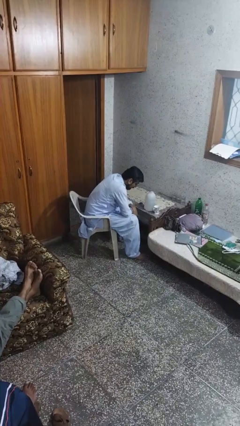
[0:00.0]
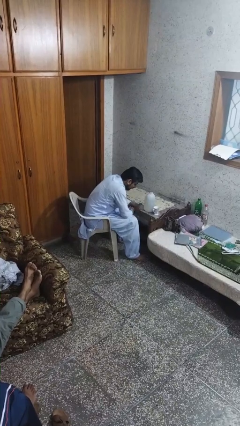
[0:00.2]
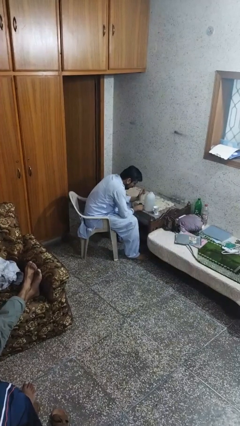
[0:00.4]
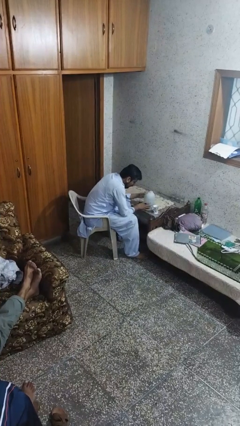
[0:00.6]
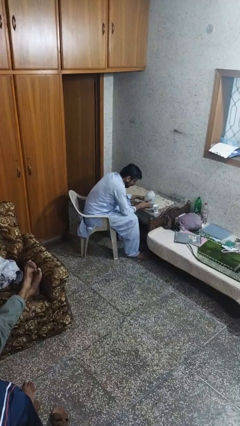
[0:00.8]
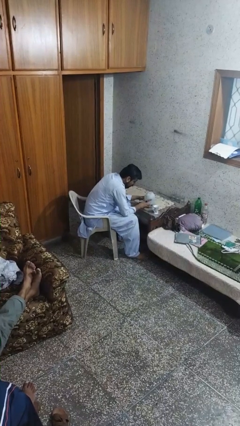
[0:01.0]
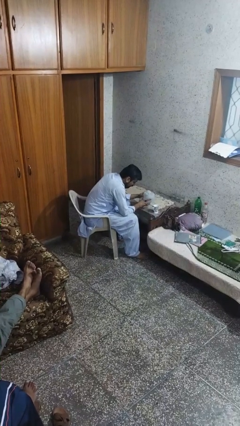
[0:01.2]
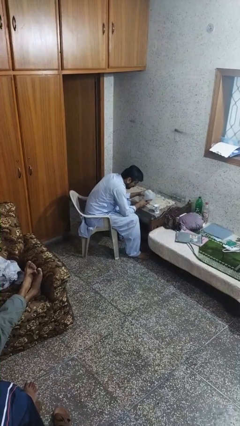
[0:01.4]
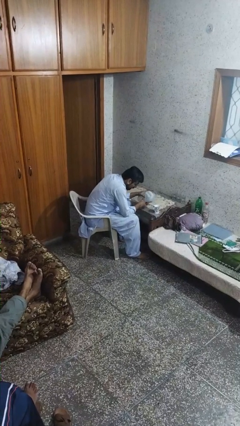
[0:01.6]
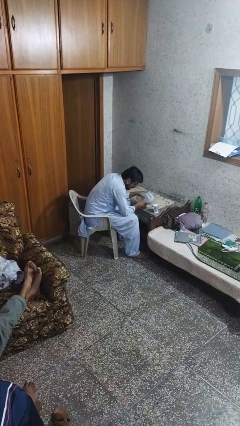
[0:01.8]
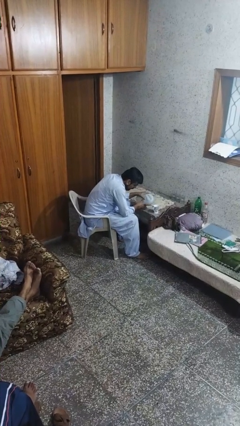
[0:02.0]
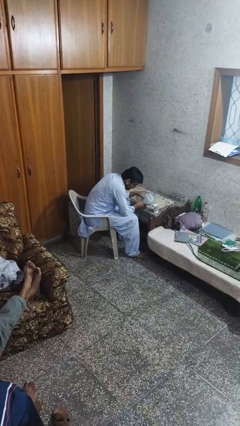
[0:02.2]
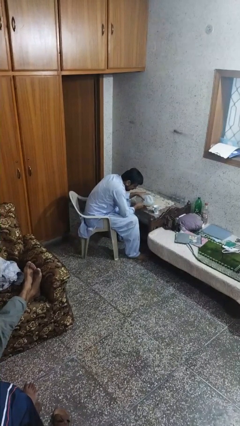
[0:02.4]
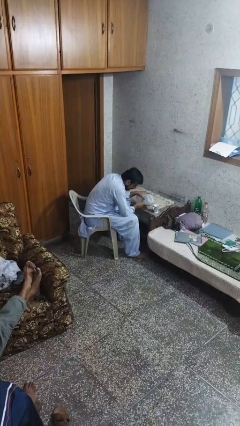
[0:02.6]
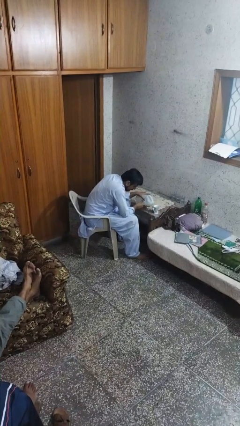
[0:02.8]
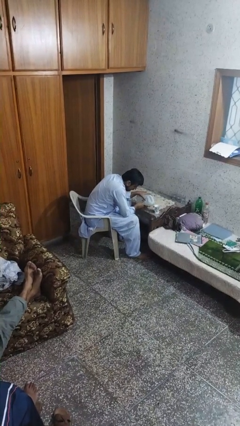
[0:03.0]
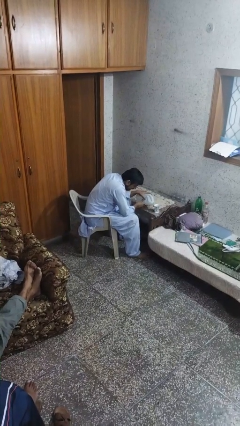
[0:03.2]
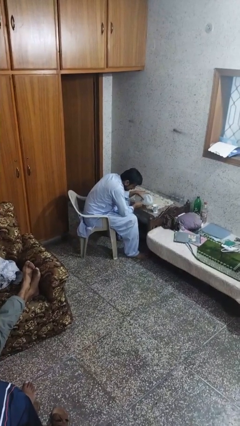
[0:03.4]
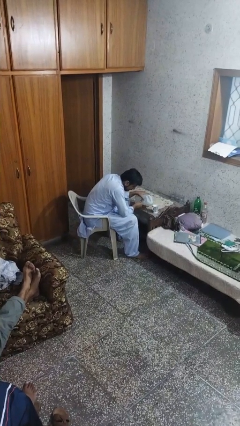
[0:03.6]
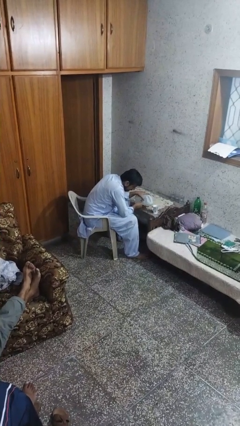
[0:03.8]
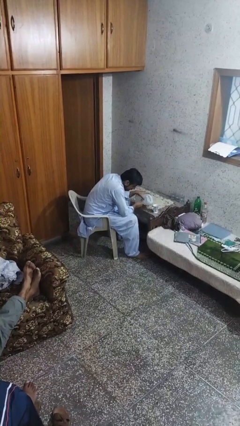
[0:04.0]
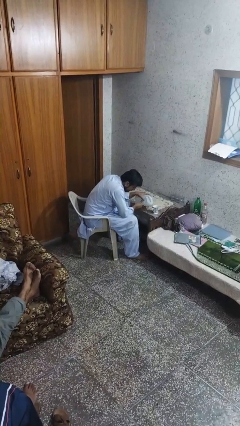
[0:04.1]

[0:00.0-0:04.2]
person pours liquid into cup

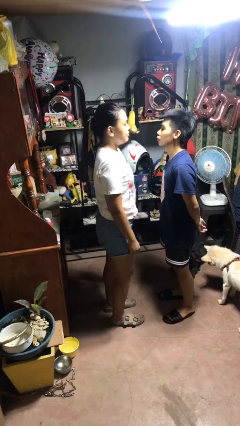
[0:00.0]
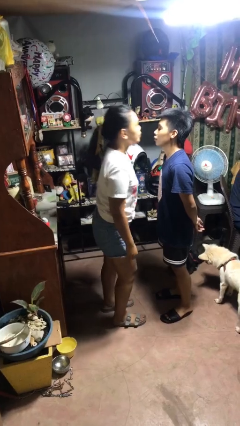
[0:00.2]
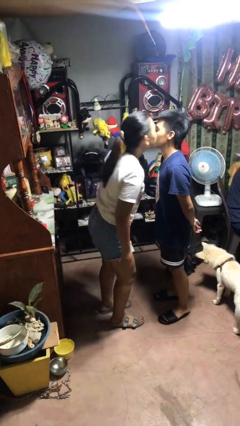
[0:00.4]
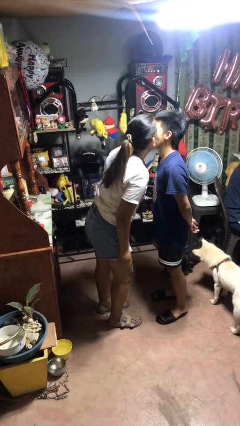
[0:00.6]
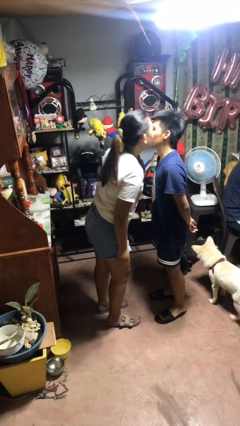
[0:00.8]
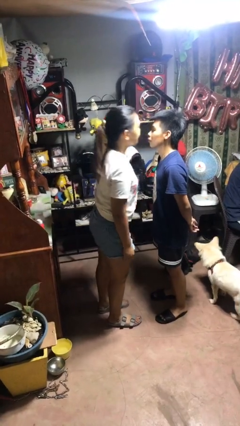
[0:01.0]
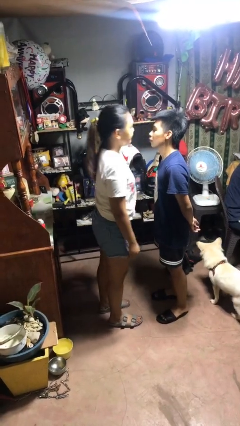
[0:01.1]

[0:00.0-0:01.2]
person kisses cheek of person

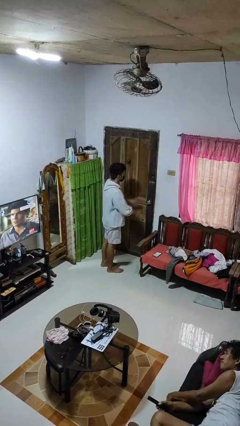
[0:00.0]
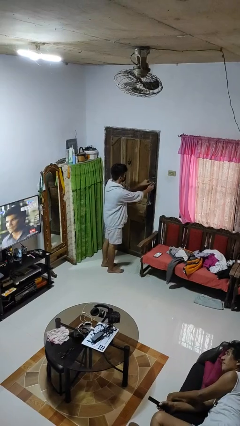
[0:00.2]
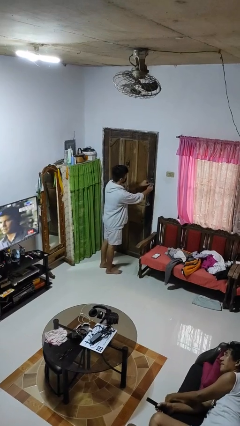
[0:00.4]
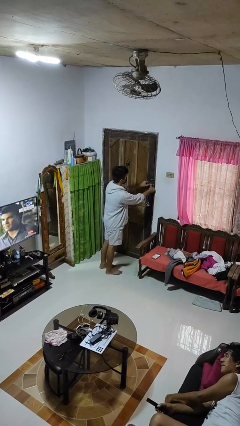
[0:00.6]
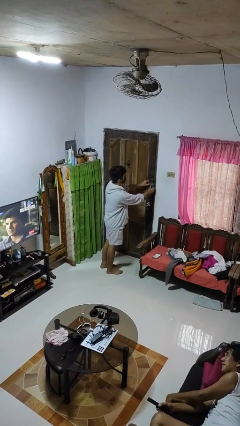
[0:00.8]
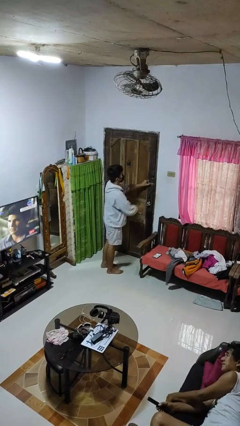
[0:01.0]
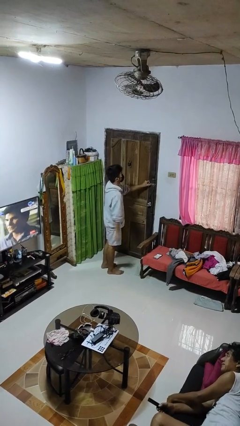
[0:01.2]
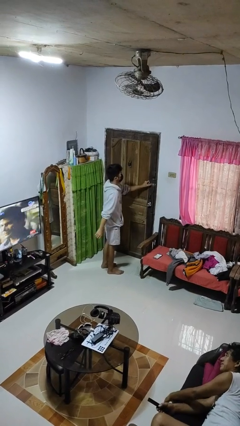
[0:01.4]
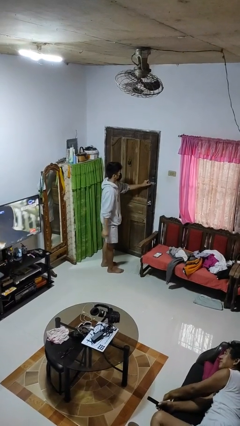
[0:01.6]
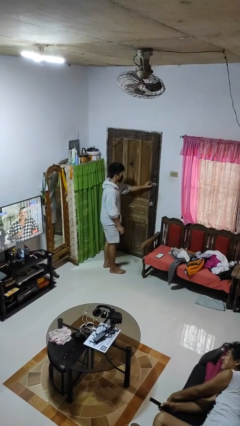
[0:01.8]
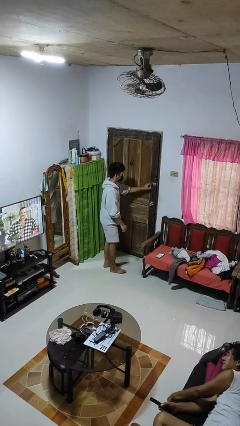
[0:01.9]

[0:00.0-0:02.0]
person unlocks door with keys

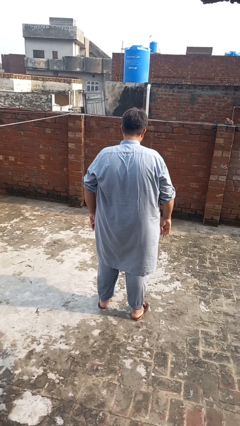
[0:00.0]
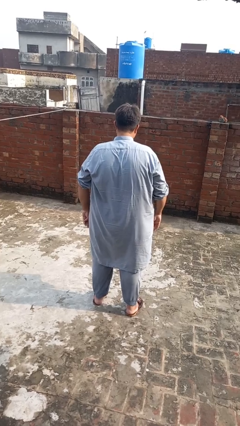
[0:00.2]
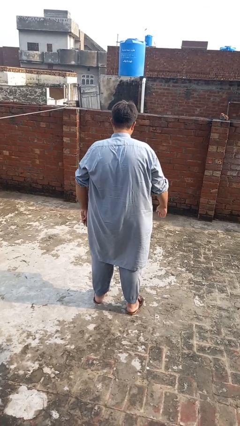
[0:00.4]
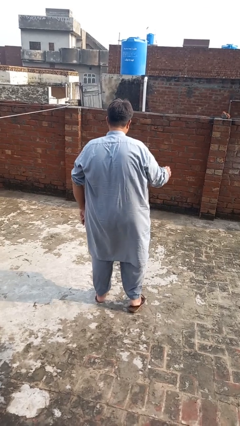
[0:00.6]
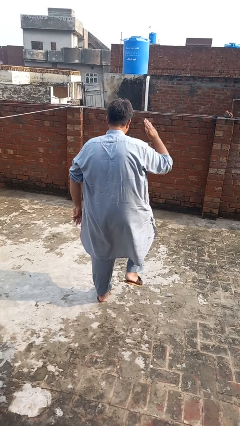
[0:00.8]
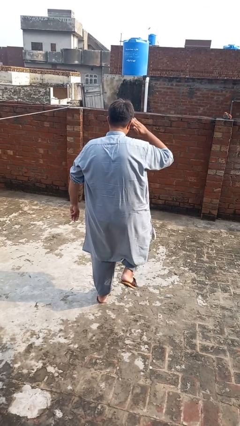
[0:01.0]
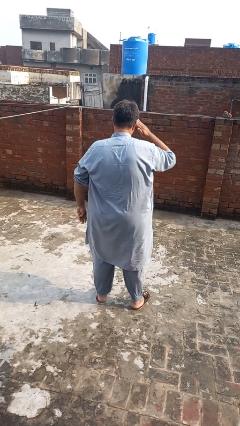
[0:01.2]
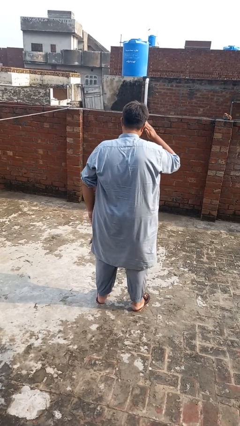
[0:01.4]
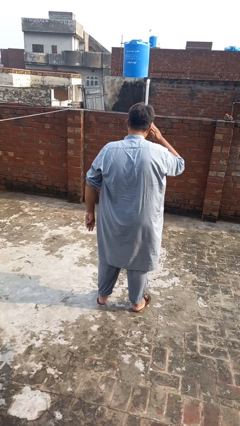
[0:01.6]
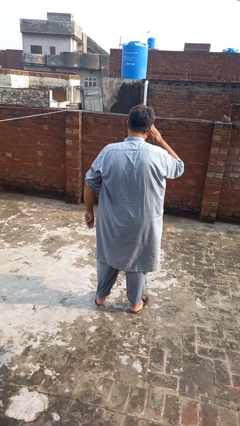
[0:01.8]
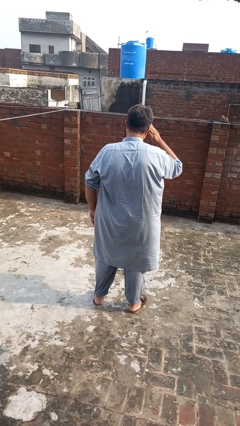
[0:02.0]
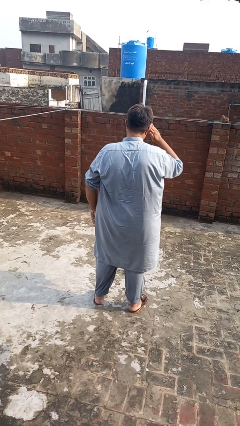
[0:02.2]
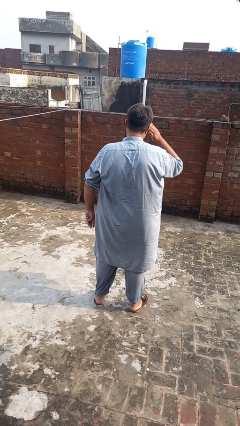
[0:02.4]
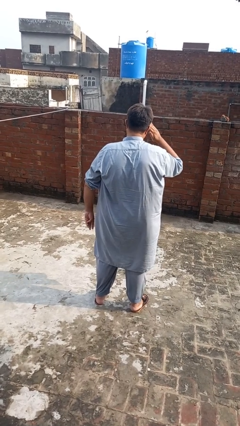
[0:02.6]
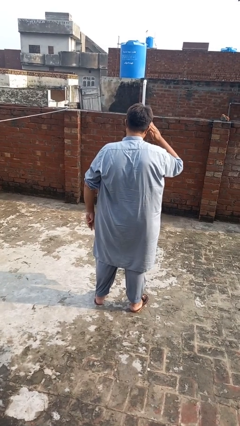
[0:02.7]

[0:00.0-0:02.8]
person salutes

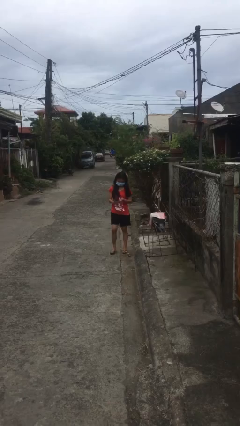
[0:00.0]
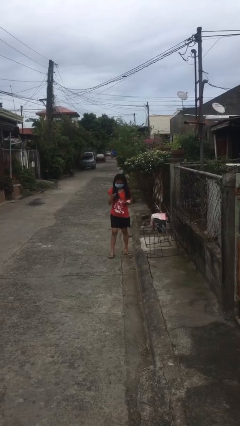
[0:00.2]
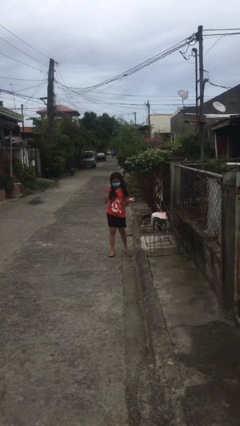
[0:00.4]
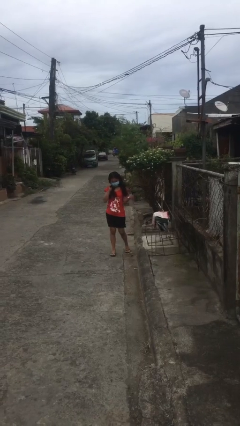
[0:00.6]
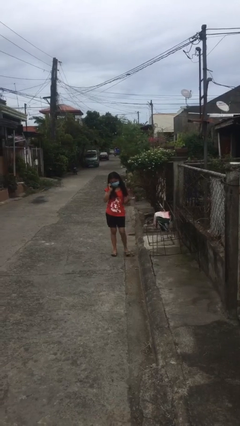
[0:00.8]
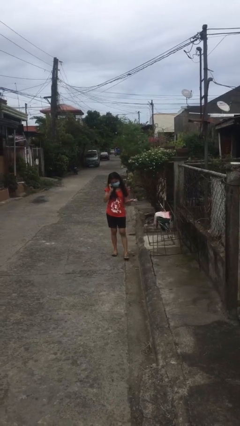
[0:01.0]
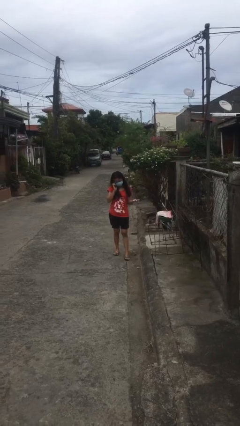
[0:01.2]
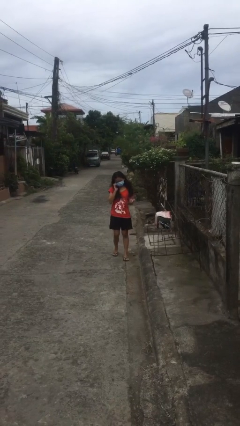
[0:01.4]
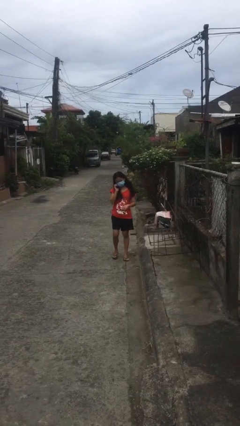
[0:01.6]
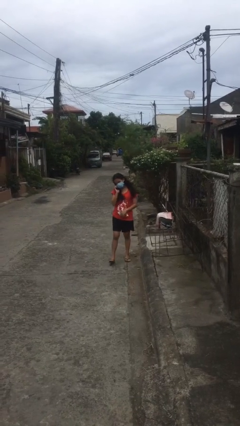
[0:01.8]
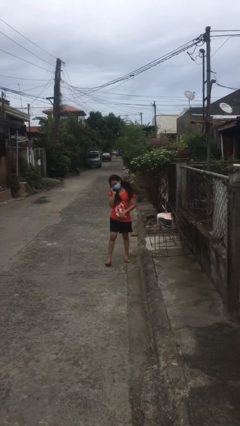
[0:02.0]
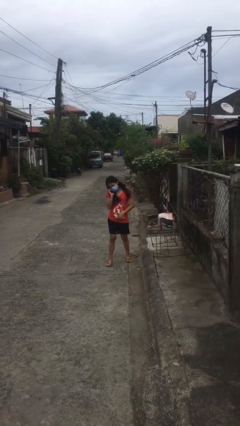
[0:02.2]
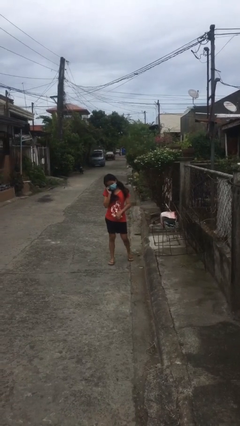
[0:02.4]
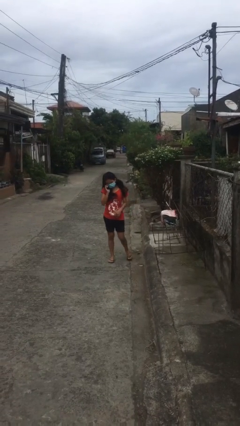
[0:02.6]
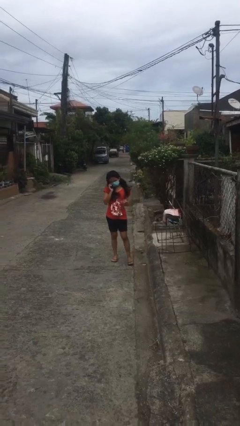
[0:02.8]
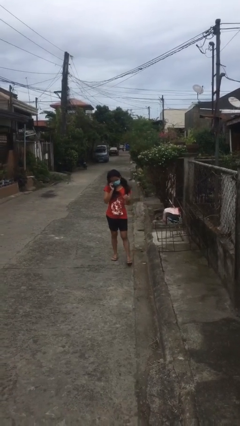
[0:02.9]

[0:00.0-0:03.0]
person talks on phone

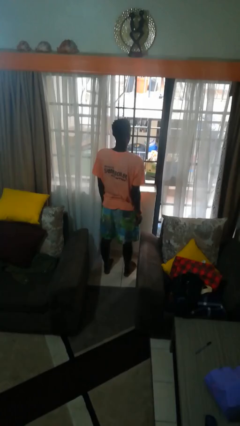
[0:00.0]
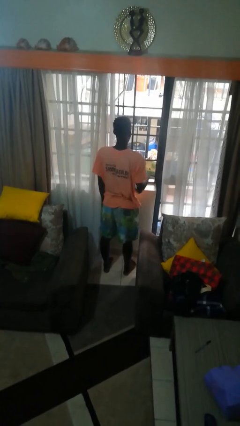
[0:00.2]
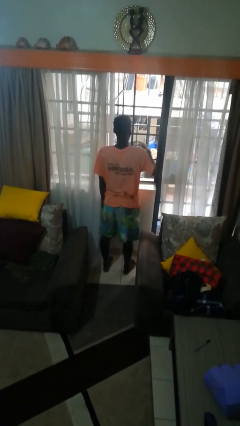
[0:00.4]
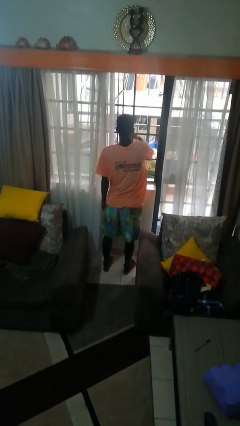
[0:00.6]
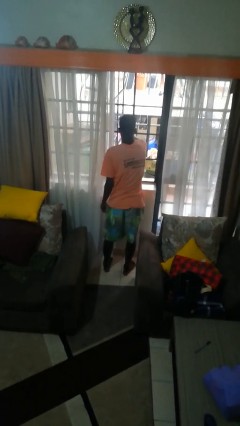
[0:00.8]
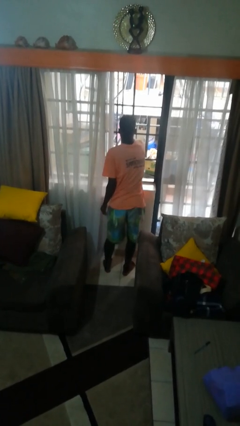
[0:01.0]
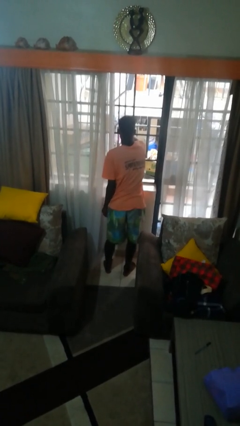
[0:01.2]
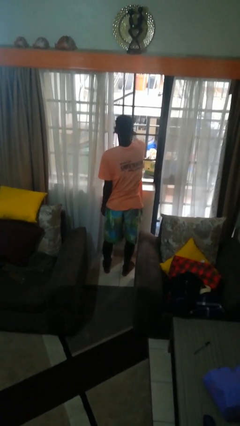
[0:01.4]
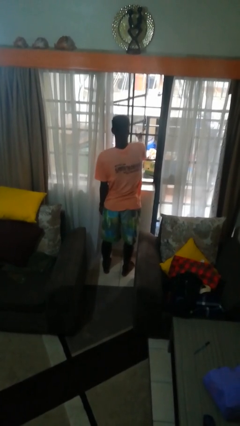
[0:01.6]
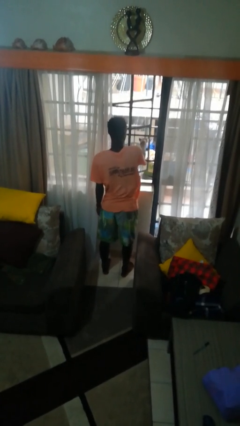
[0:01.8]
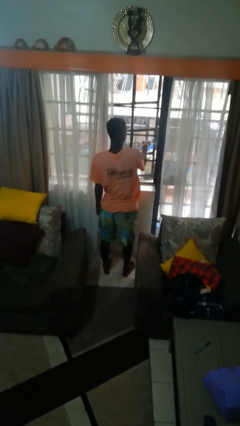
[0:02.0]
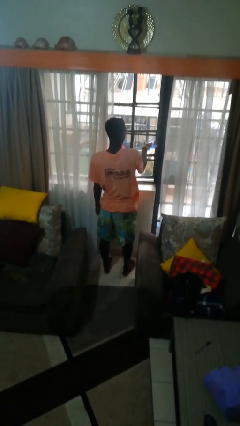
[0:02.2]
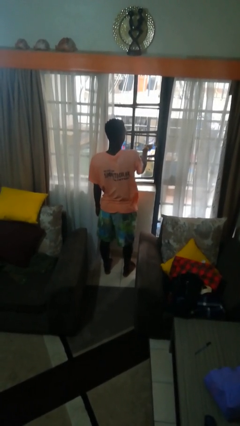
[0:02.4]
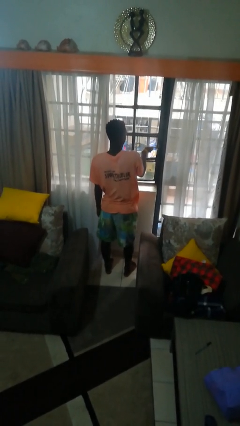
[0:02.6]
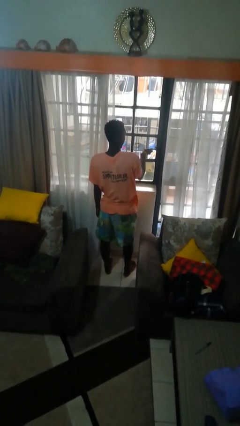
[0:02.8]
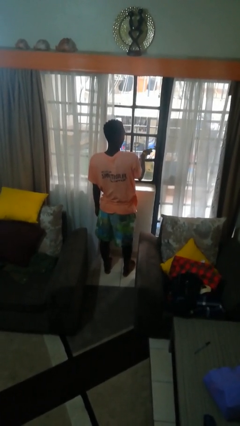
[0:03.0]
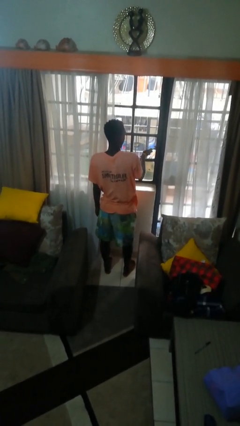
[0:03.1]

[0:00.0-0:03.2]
person closes home window

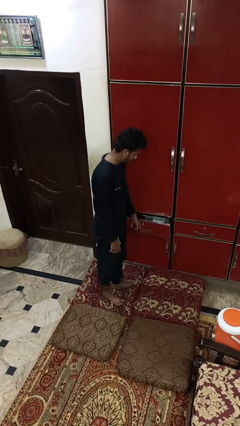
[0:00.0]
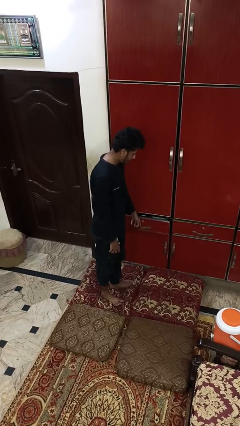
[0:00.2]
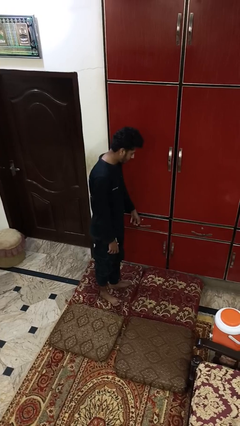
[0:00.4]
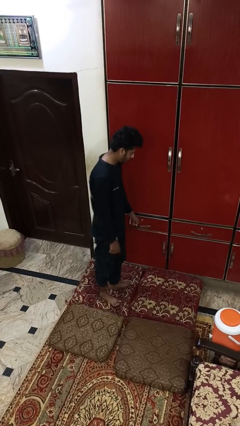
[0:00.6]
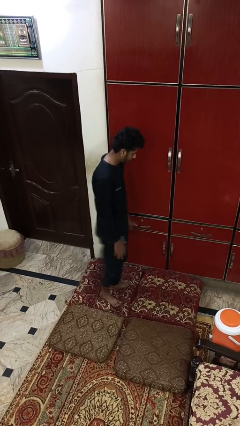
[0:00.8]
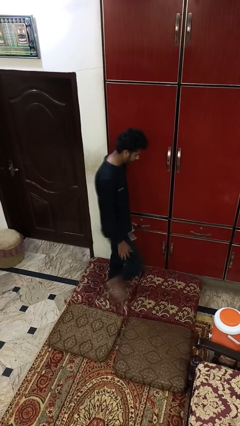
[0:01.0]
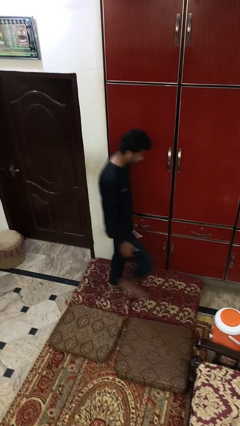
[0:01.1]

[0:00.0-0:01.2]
person closes dresser drawer
